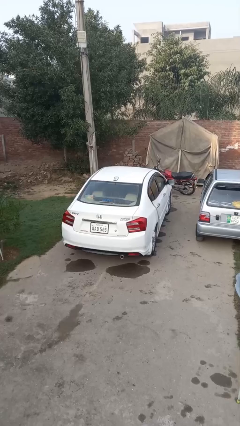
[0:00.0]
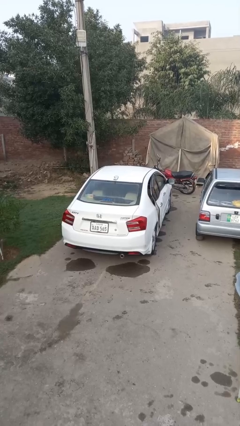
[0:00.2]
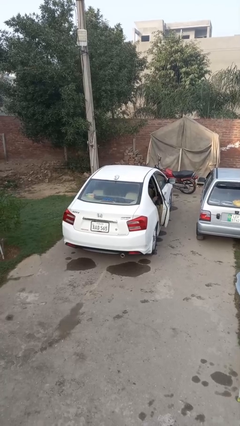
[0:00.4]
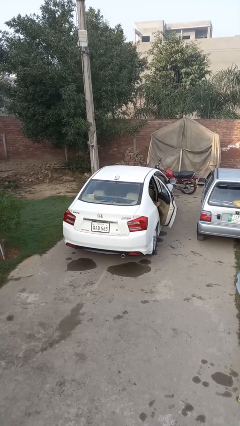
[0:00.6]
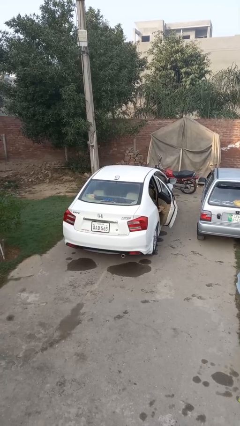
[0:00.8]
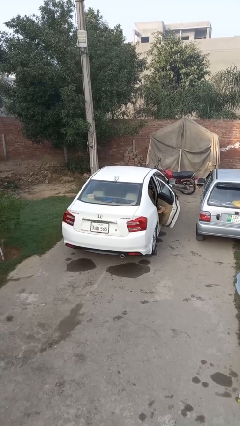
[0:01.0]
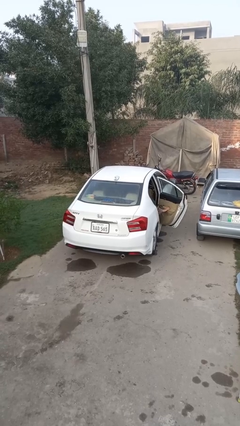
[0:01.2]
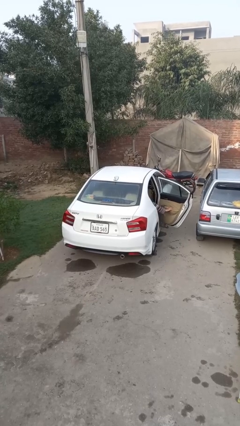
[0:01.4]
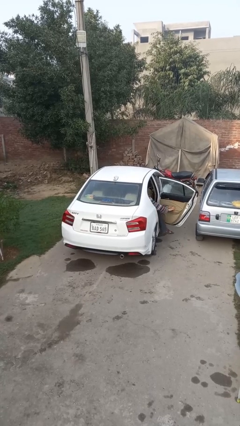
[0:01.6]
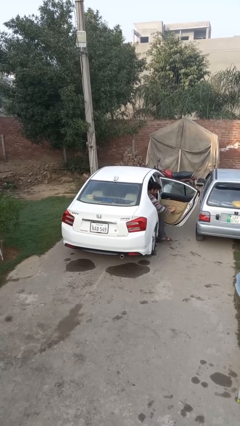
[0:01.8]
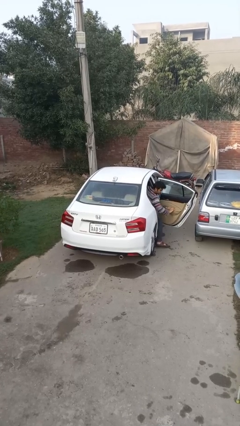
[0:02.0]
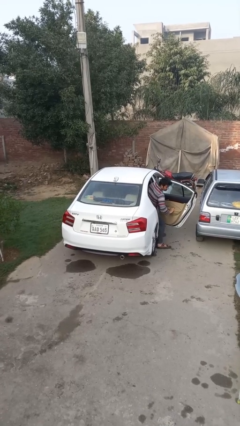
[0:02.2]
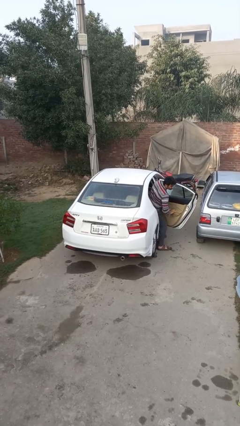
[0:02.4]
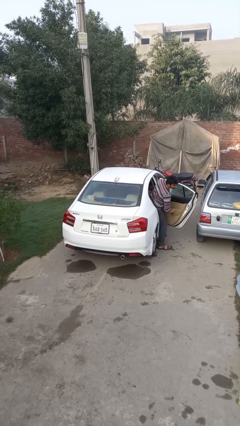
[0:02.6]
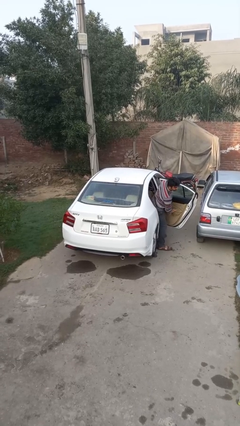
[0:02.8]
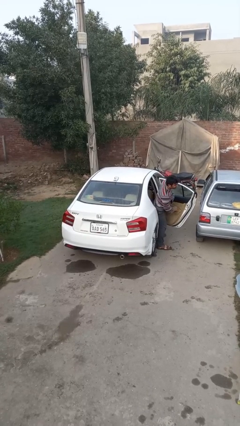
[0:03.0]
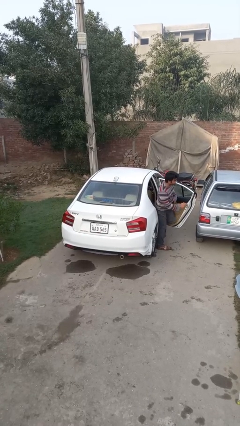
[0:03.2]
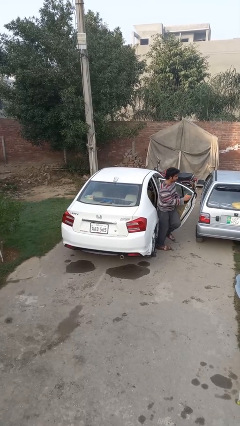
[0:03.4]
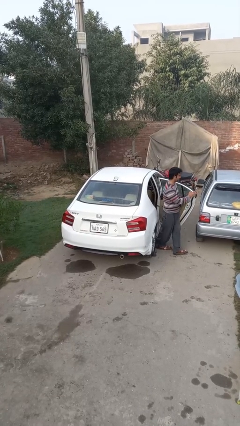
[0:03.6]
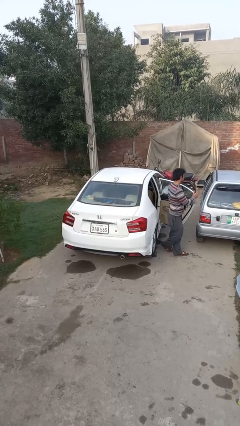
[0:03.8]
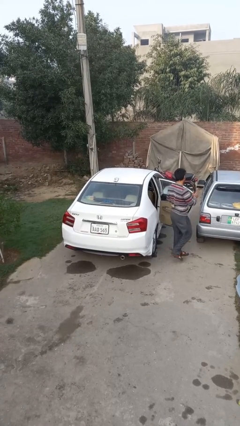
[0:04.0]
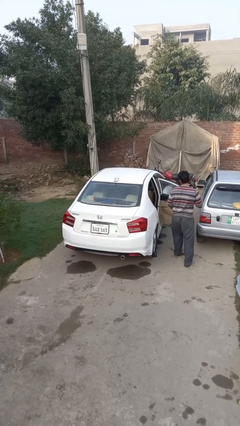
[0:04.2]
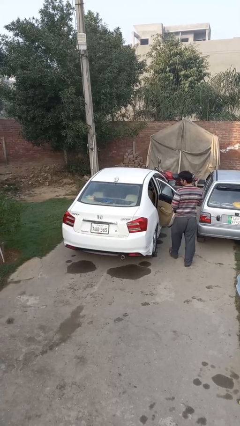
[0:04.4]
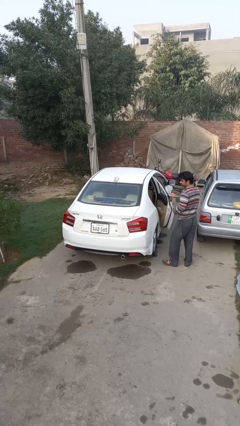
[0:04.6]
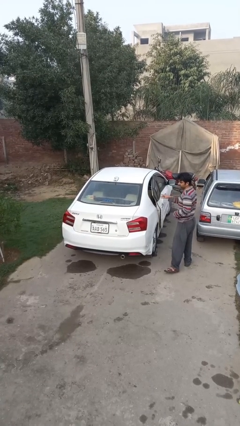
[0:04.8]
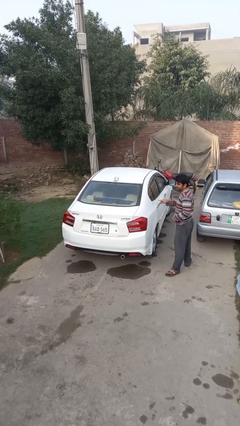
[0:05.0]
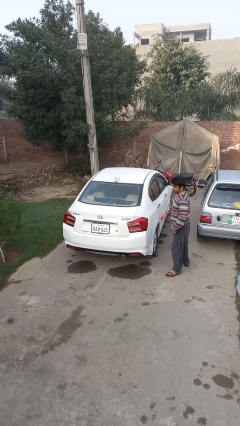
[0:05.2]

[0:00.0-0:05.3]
car drops off person

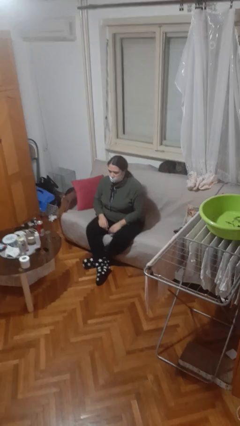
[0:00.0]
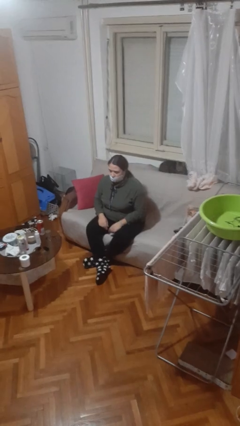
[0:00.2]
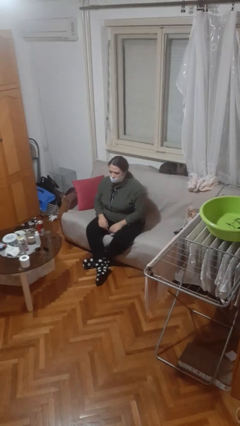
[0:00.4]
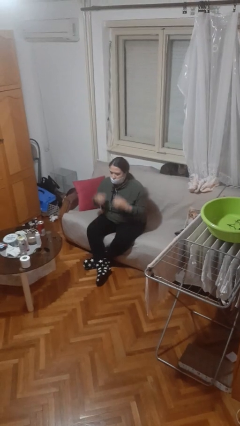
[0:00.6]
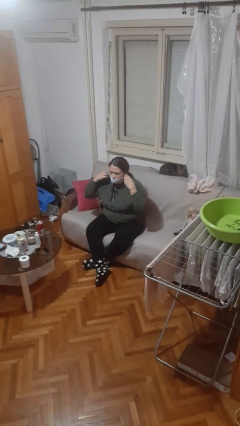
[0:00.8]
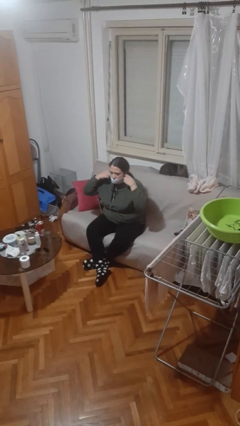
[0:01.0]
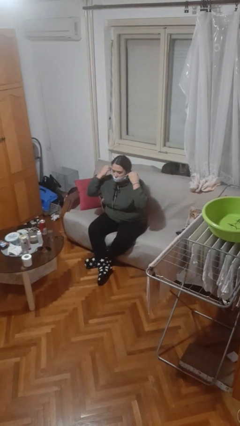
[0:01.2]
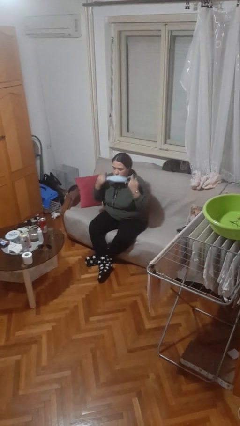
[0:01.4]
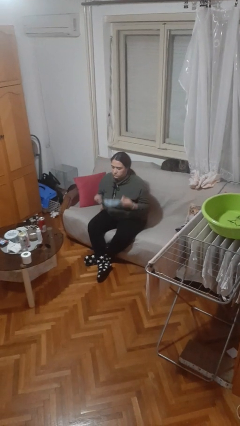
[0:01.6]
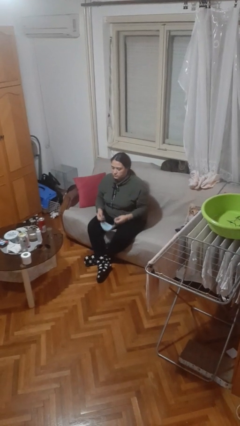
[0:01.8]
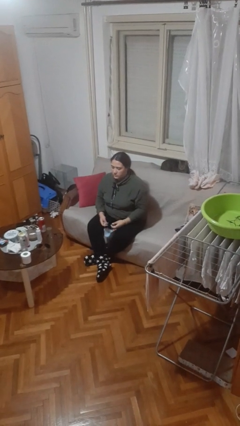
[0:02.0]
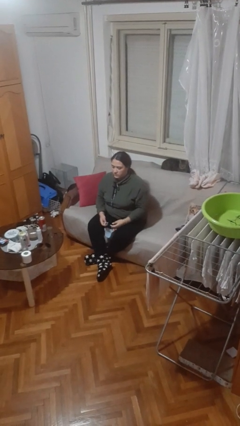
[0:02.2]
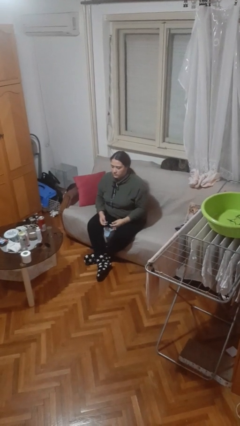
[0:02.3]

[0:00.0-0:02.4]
person takes off facemask

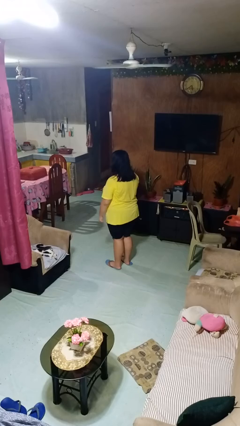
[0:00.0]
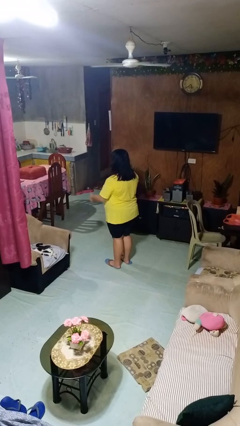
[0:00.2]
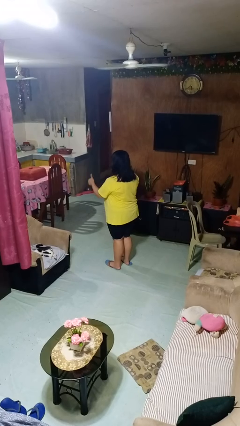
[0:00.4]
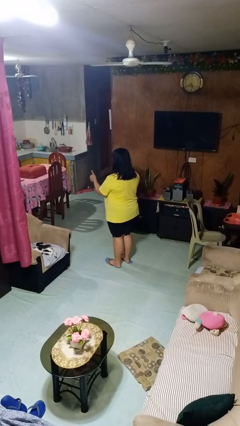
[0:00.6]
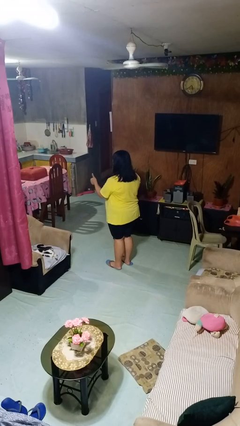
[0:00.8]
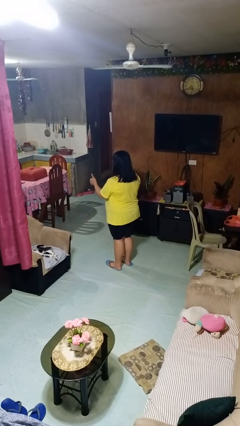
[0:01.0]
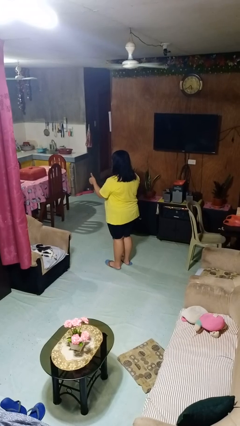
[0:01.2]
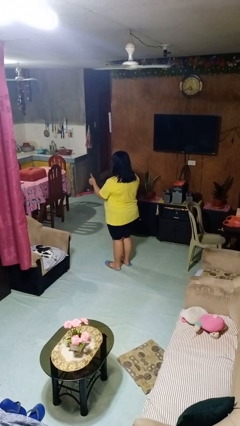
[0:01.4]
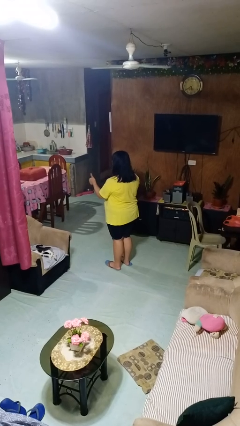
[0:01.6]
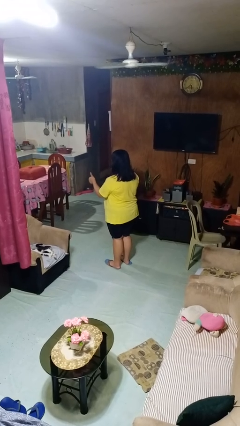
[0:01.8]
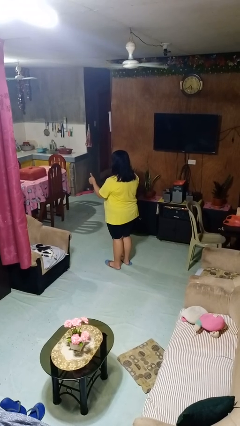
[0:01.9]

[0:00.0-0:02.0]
person gestures thumbs up

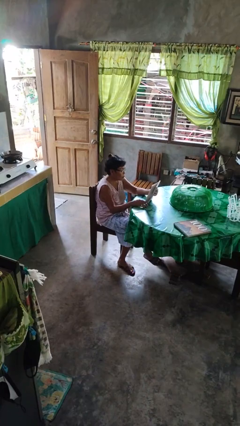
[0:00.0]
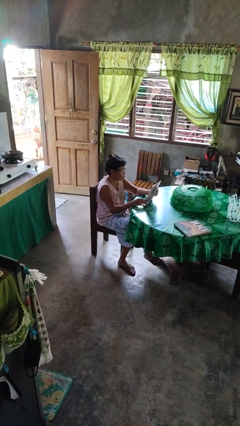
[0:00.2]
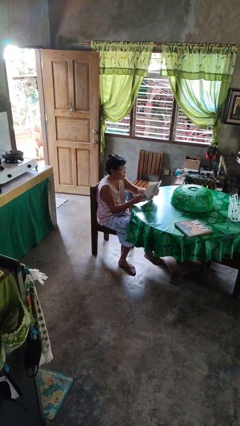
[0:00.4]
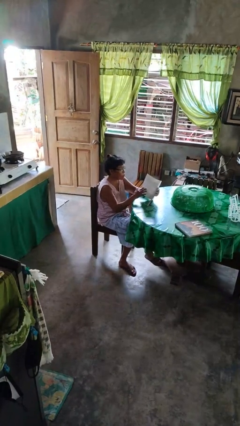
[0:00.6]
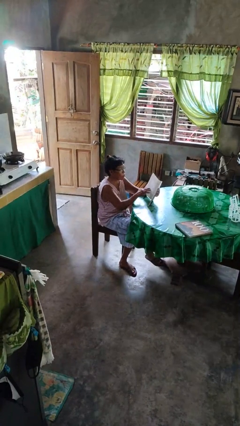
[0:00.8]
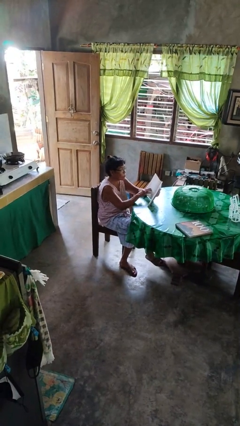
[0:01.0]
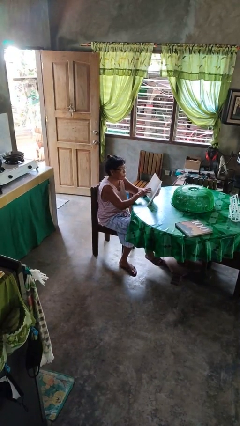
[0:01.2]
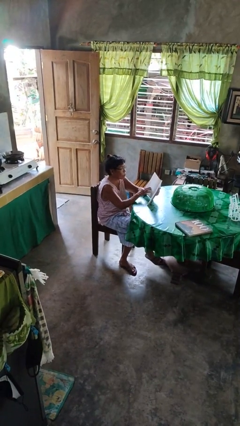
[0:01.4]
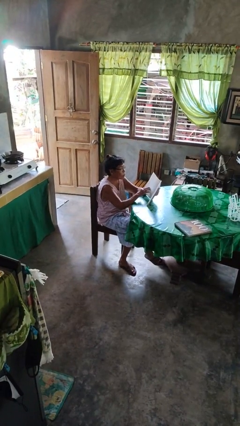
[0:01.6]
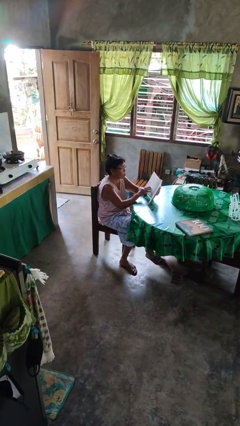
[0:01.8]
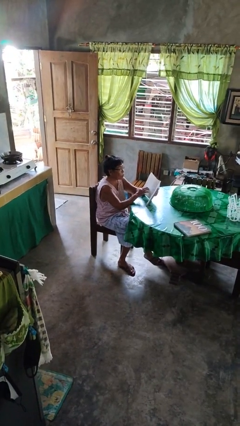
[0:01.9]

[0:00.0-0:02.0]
person reads magazine

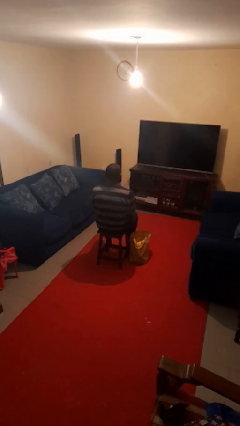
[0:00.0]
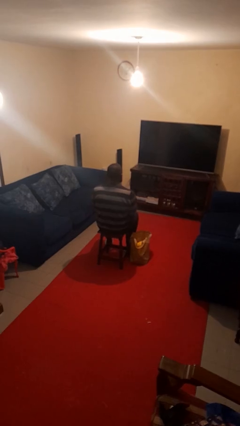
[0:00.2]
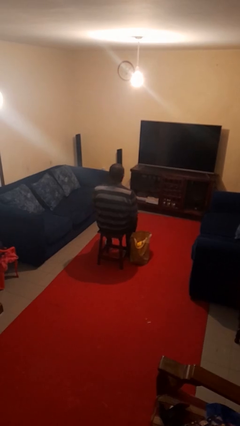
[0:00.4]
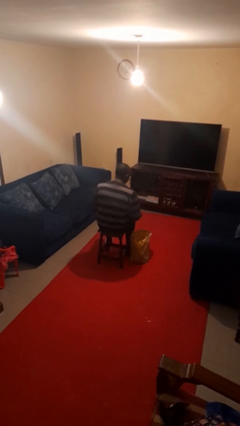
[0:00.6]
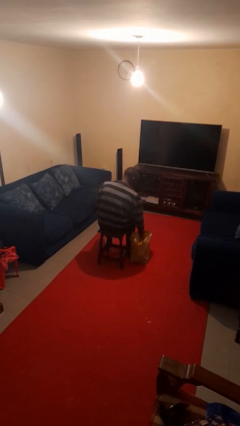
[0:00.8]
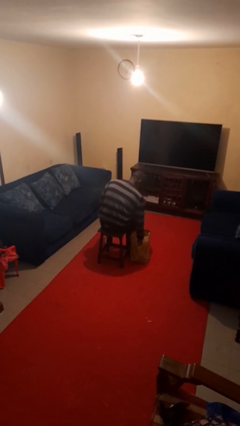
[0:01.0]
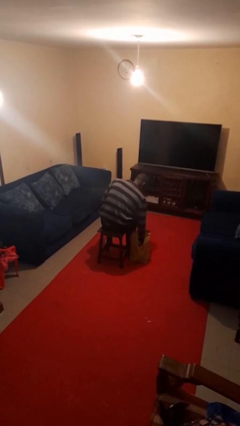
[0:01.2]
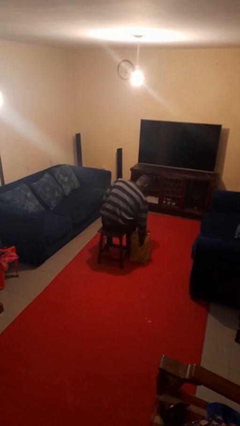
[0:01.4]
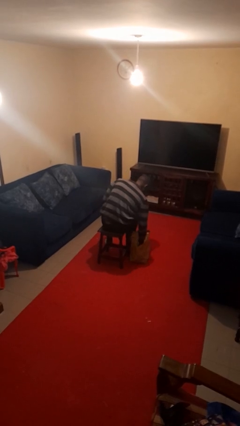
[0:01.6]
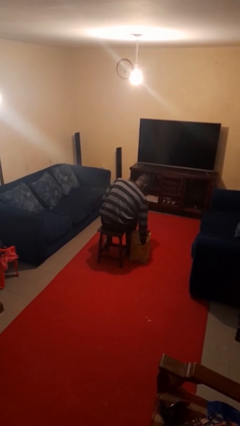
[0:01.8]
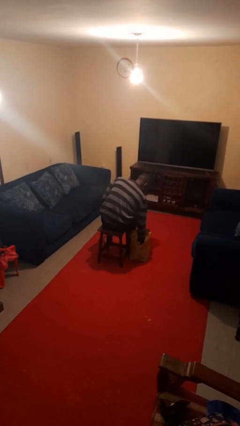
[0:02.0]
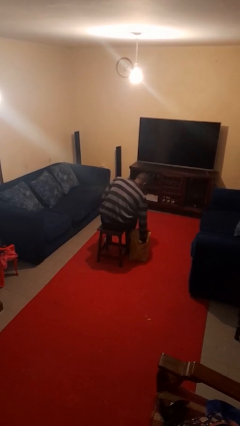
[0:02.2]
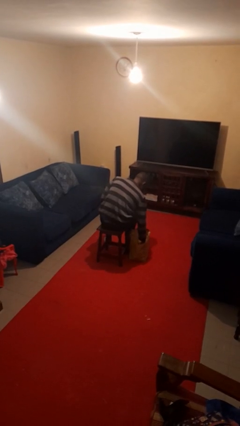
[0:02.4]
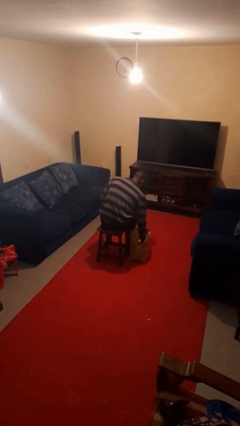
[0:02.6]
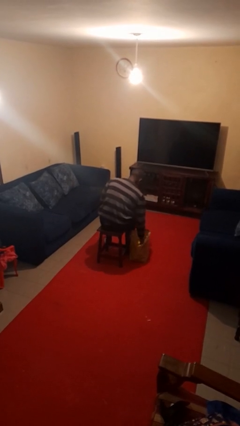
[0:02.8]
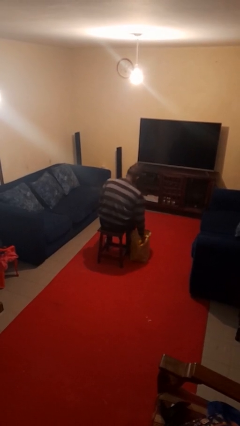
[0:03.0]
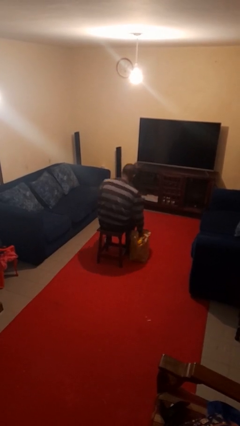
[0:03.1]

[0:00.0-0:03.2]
person searches in bag

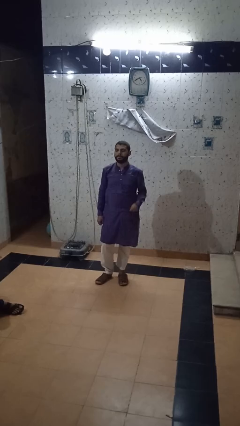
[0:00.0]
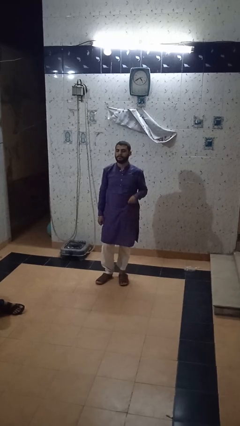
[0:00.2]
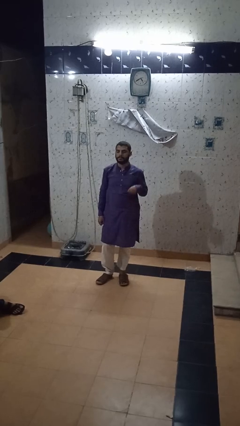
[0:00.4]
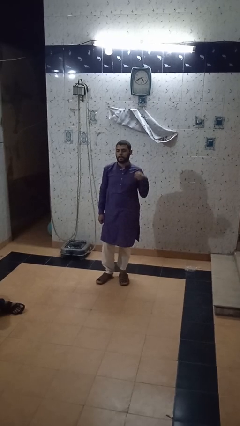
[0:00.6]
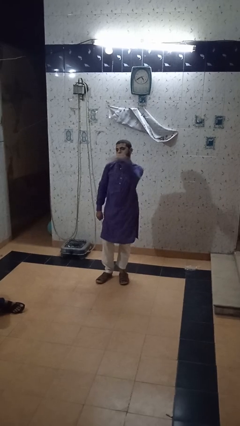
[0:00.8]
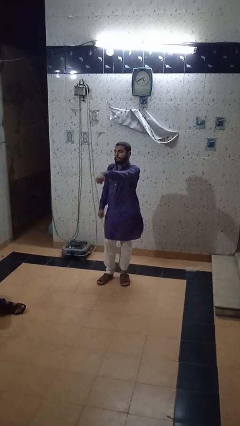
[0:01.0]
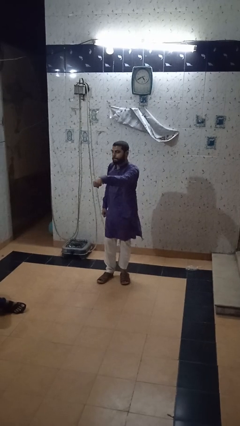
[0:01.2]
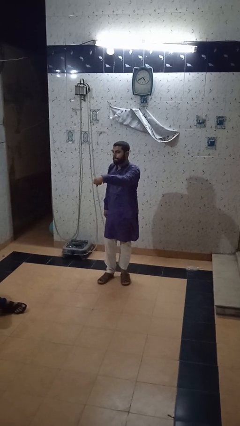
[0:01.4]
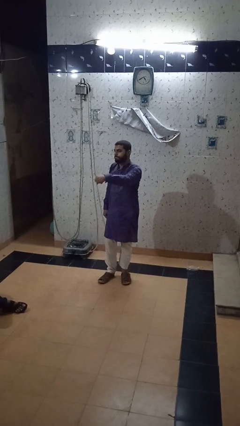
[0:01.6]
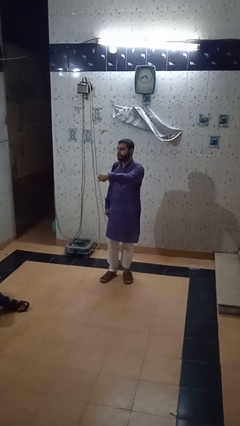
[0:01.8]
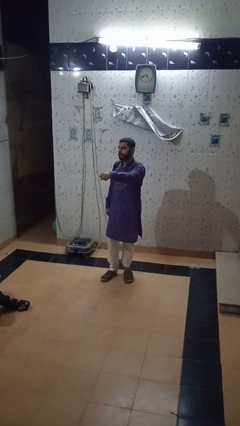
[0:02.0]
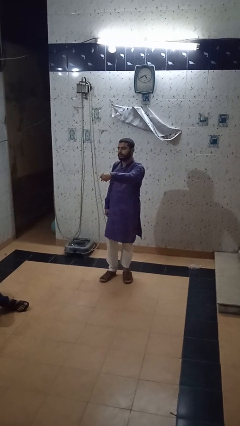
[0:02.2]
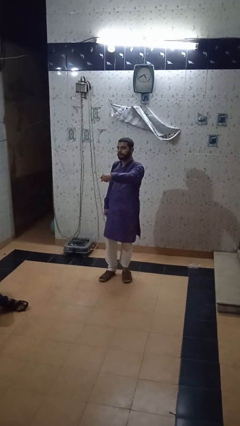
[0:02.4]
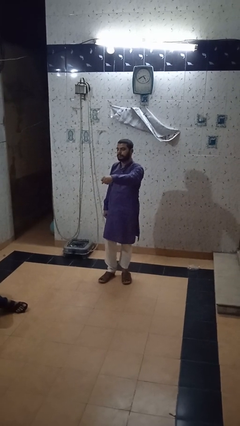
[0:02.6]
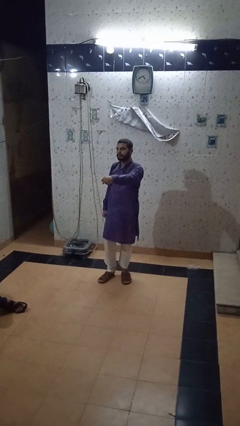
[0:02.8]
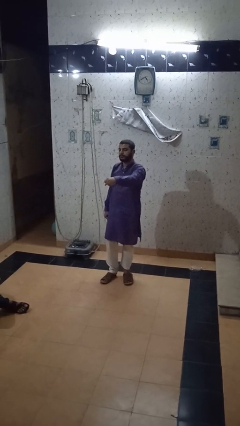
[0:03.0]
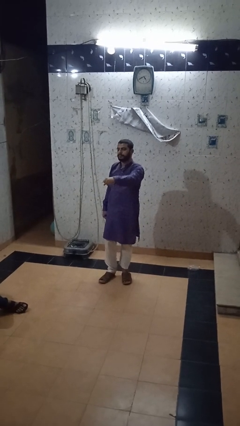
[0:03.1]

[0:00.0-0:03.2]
person punches
